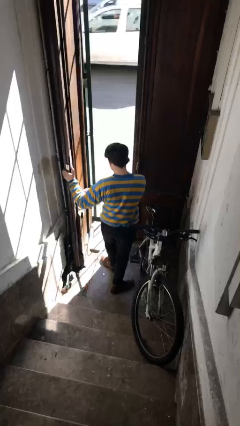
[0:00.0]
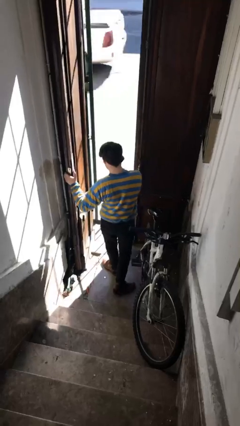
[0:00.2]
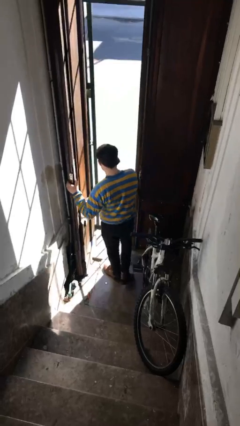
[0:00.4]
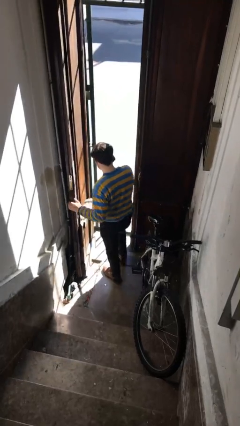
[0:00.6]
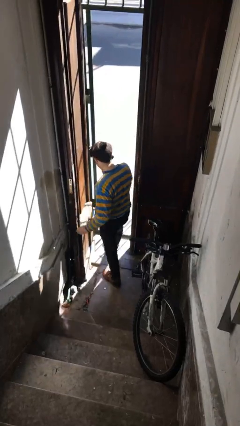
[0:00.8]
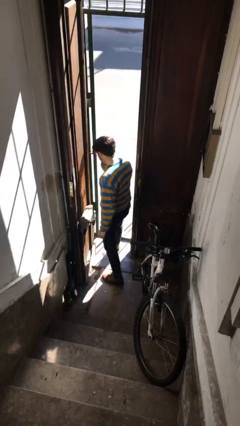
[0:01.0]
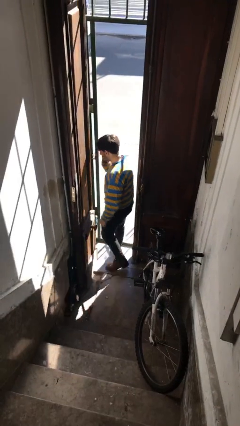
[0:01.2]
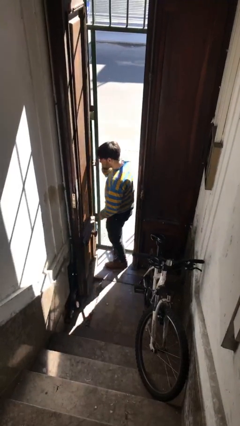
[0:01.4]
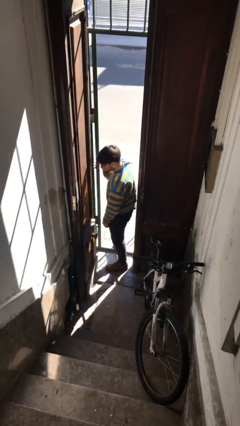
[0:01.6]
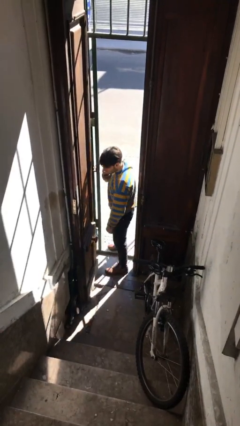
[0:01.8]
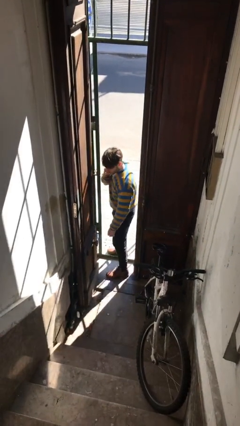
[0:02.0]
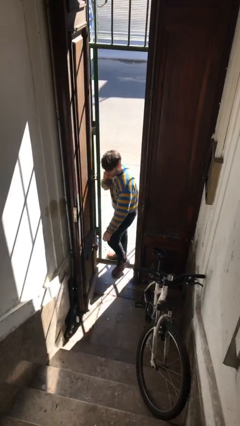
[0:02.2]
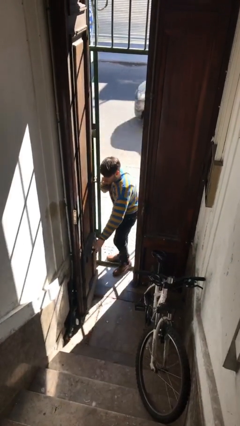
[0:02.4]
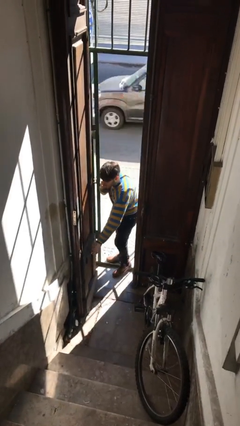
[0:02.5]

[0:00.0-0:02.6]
person exits scene through structure

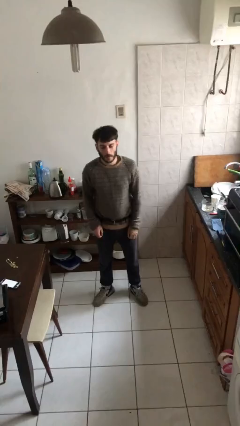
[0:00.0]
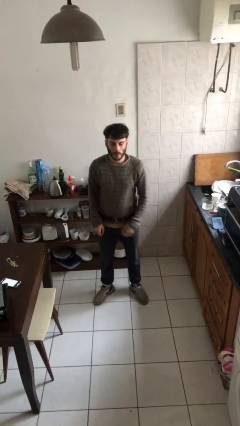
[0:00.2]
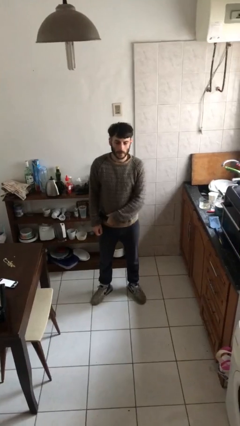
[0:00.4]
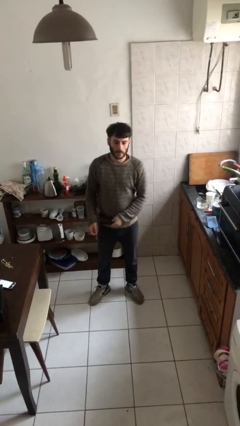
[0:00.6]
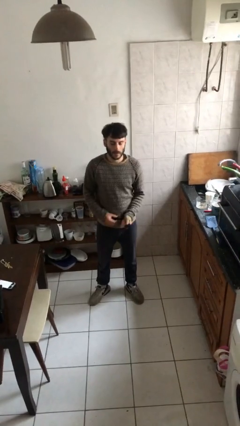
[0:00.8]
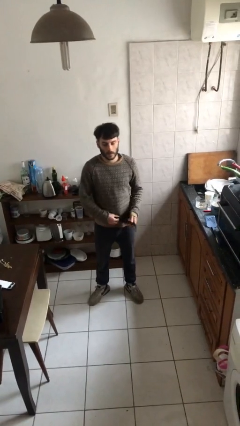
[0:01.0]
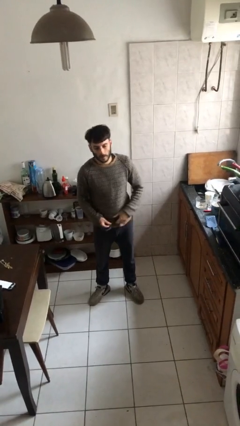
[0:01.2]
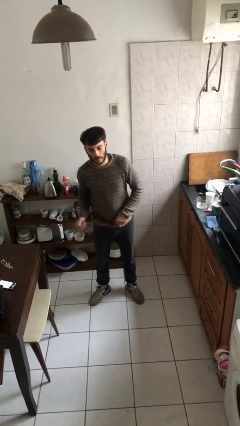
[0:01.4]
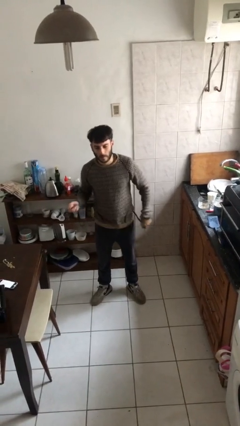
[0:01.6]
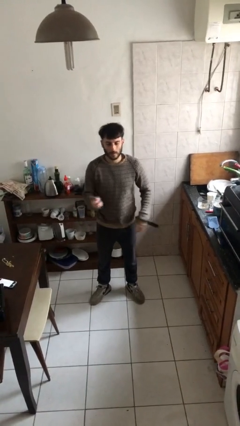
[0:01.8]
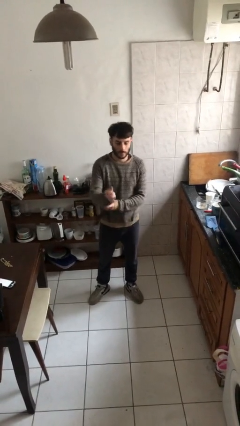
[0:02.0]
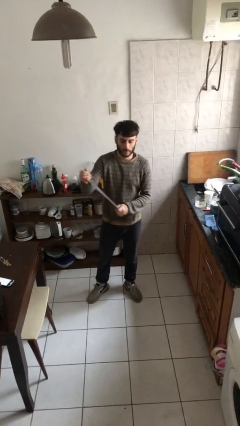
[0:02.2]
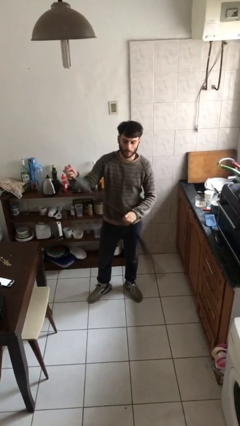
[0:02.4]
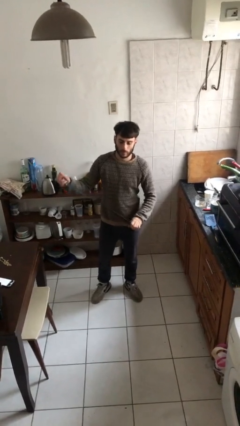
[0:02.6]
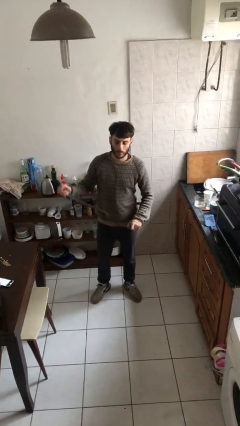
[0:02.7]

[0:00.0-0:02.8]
person takes off belt

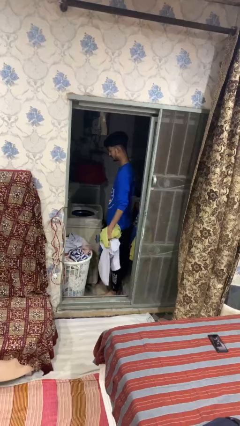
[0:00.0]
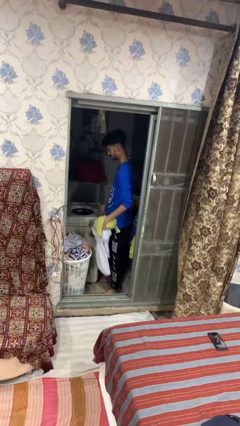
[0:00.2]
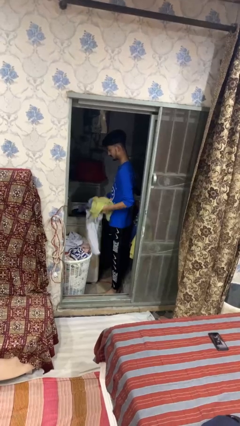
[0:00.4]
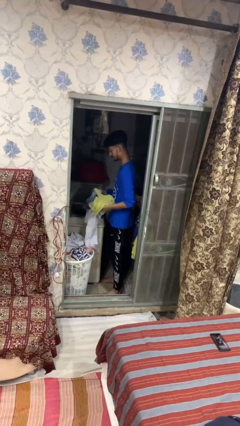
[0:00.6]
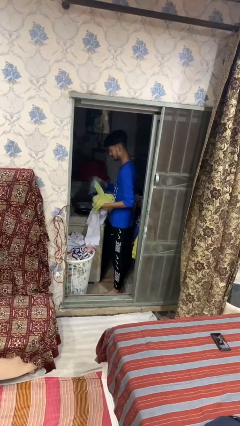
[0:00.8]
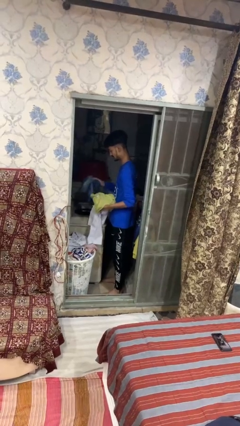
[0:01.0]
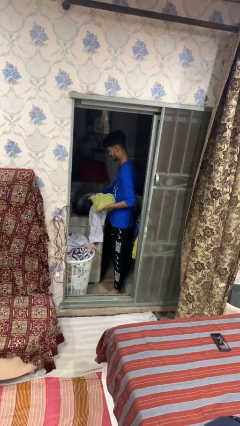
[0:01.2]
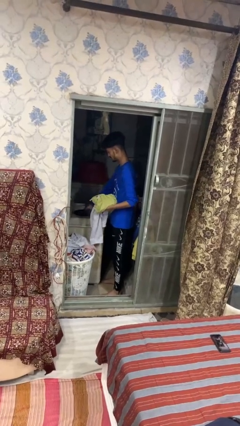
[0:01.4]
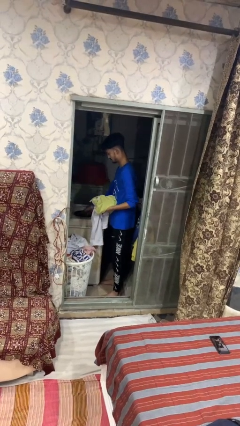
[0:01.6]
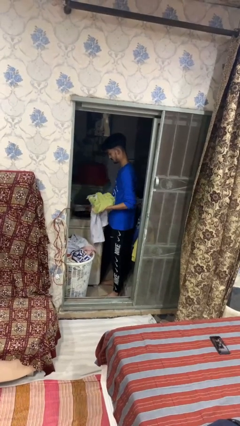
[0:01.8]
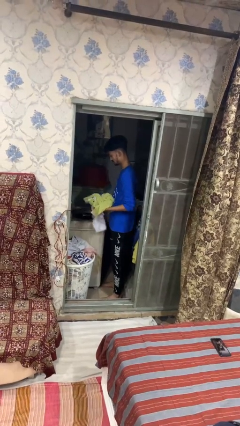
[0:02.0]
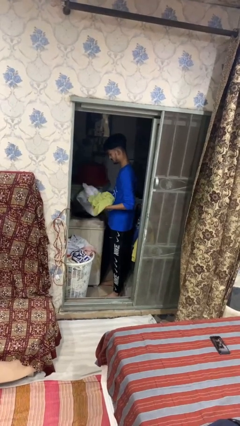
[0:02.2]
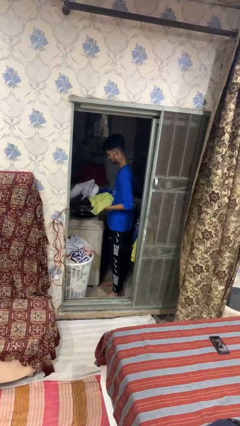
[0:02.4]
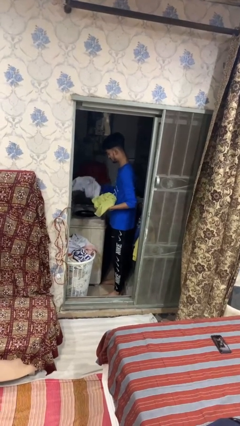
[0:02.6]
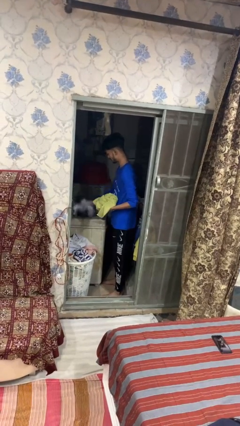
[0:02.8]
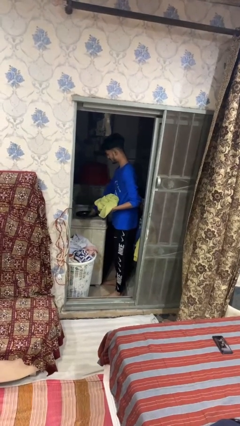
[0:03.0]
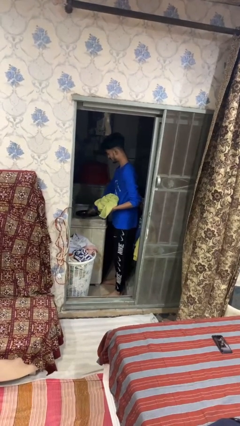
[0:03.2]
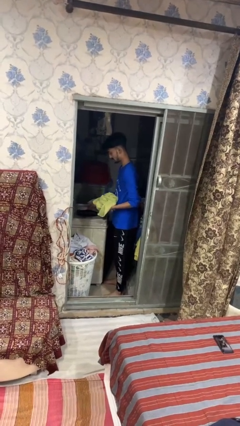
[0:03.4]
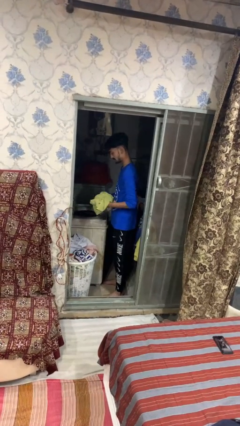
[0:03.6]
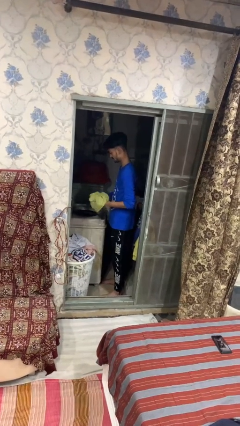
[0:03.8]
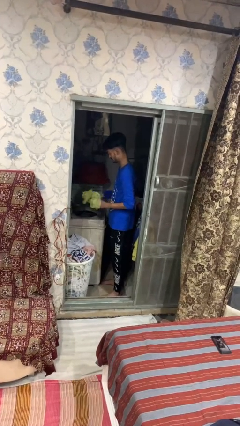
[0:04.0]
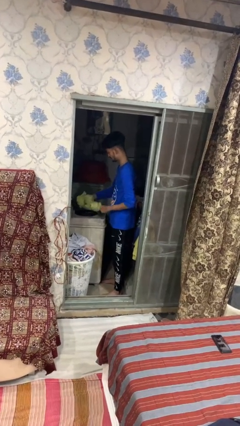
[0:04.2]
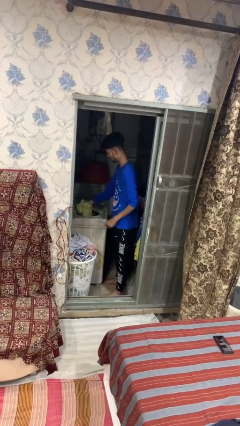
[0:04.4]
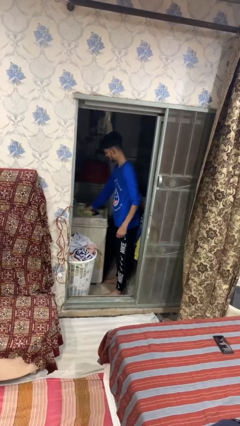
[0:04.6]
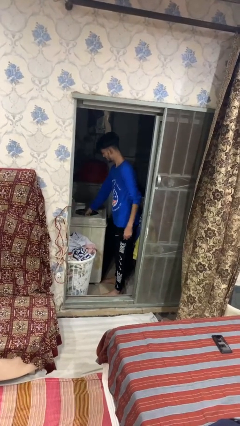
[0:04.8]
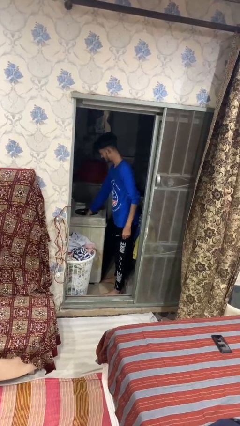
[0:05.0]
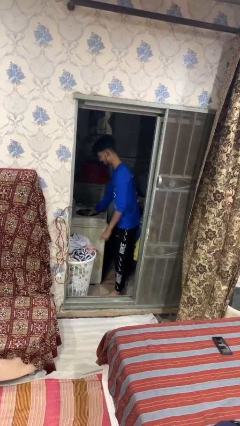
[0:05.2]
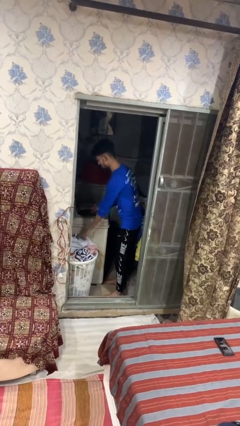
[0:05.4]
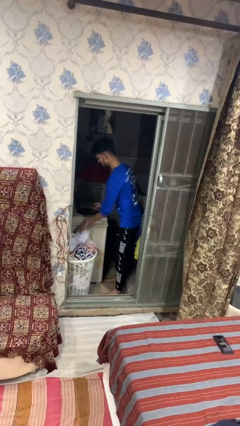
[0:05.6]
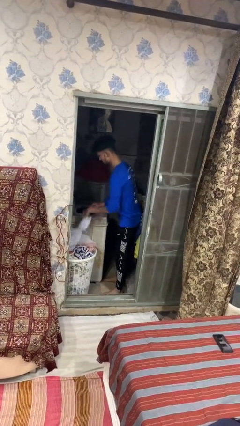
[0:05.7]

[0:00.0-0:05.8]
person loads dryer

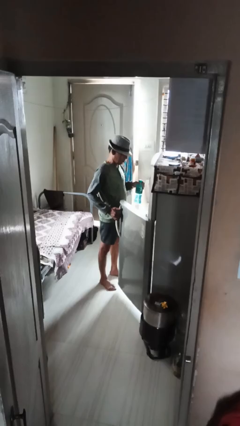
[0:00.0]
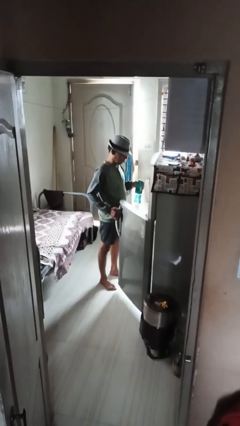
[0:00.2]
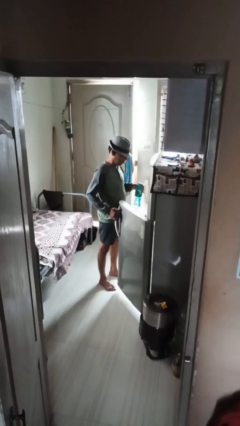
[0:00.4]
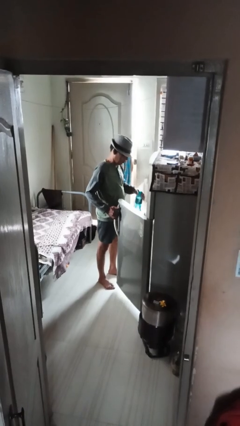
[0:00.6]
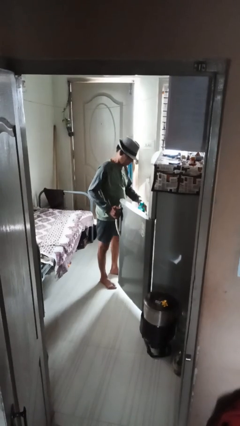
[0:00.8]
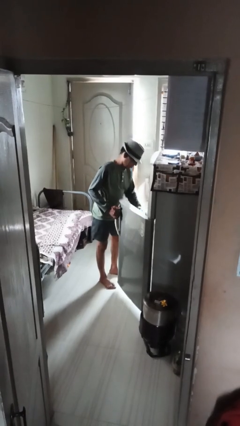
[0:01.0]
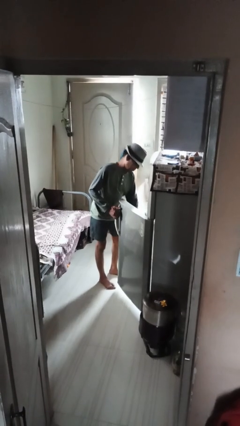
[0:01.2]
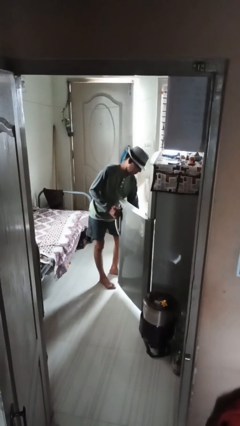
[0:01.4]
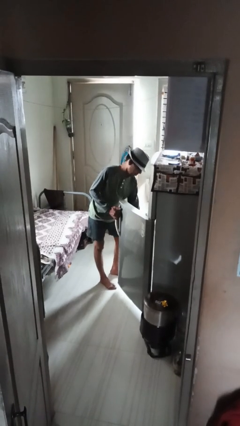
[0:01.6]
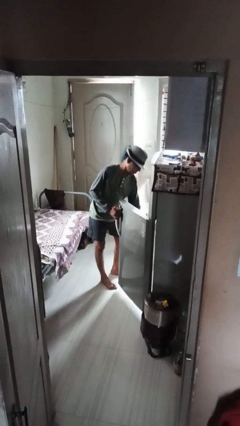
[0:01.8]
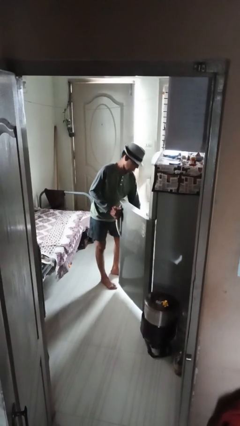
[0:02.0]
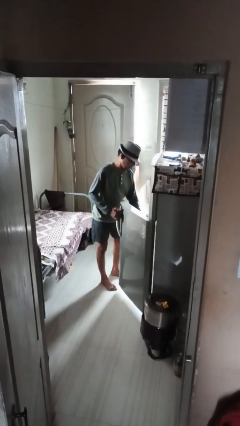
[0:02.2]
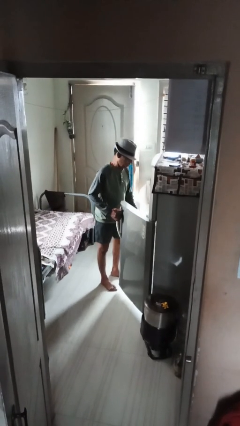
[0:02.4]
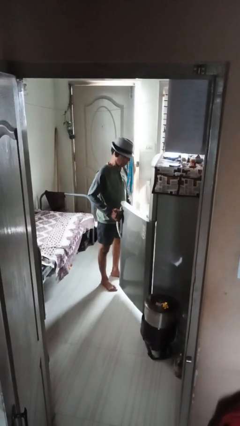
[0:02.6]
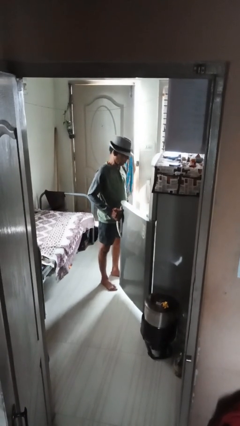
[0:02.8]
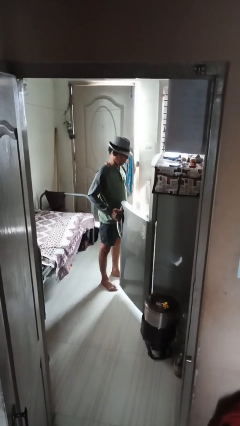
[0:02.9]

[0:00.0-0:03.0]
person puts object into refrigerator

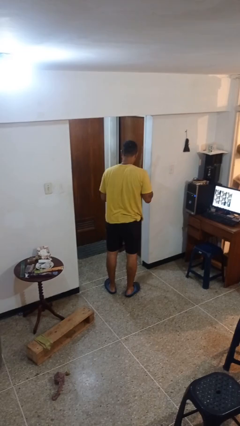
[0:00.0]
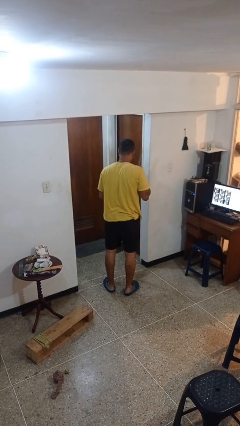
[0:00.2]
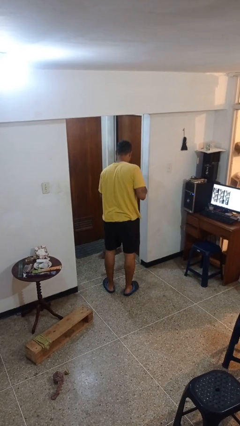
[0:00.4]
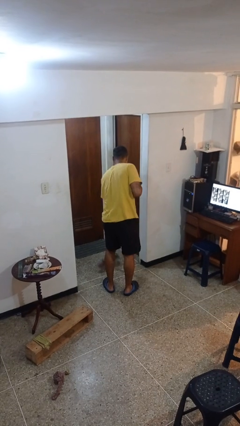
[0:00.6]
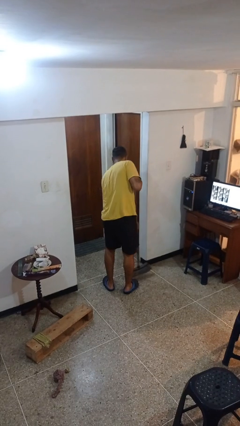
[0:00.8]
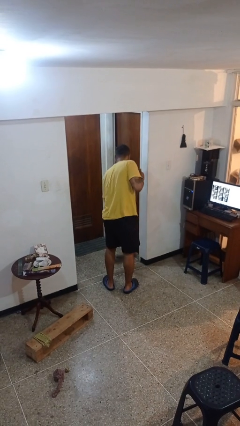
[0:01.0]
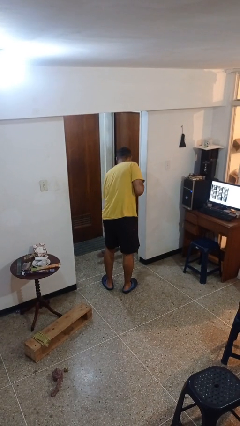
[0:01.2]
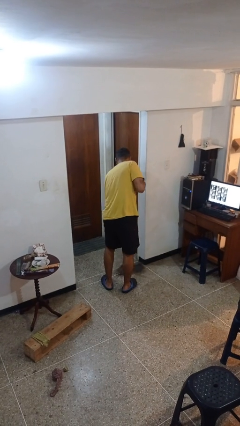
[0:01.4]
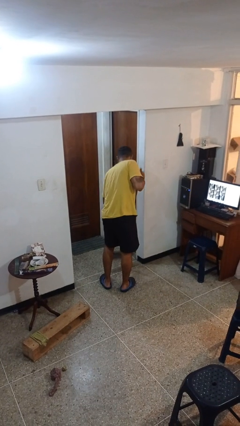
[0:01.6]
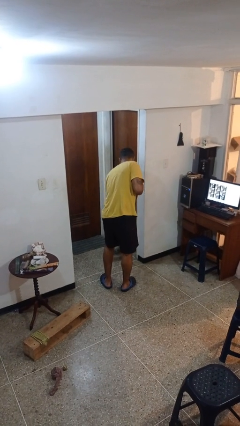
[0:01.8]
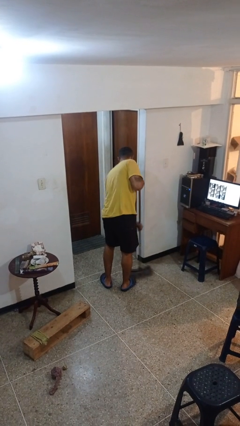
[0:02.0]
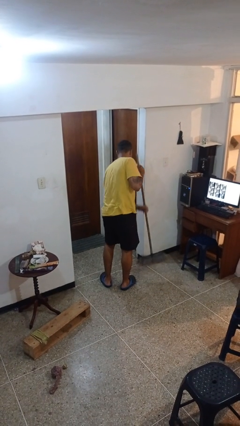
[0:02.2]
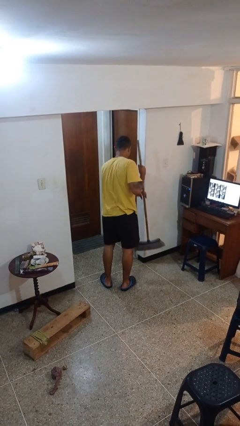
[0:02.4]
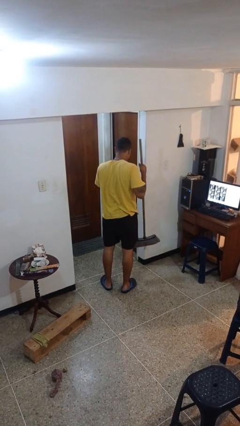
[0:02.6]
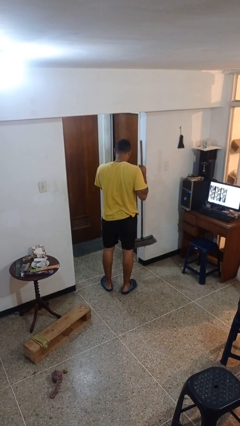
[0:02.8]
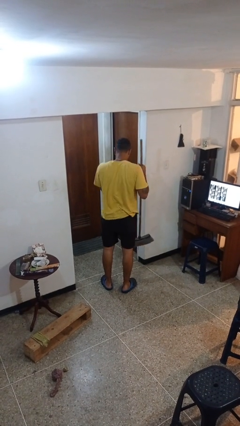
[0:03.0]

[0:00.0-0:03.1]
person sweeps floor

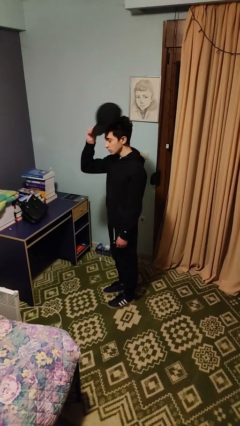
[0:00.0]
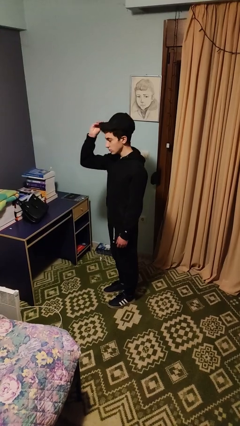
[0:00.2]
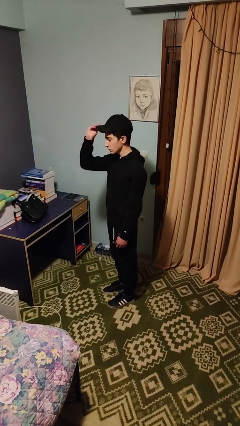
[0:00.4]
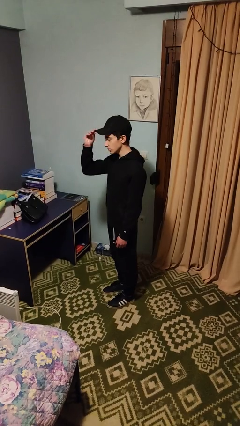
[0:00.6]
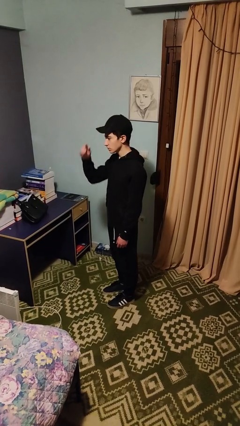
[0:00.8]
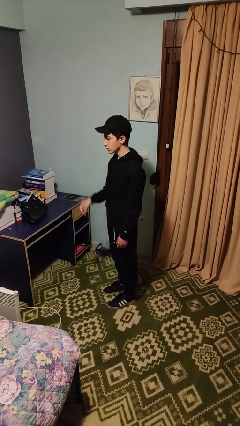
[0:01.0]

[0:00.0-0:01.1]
person puts on hat
